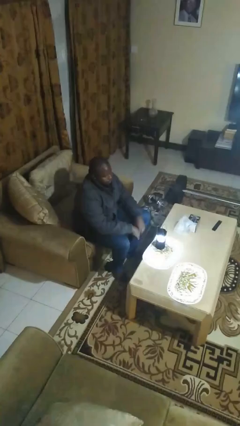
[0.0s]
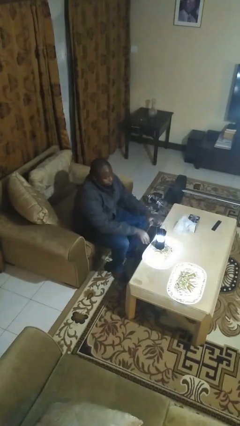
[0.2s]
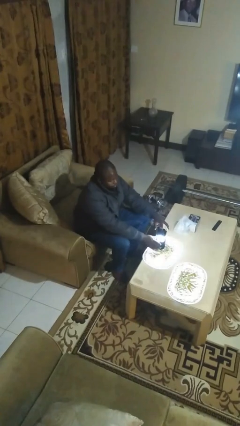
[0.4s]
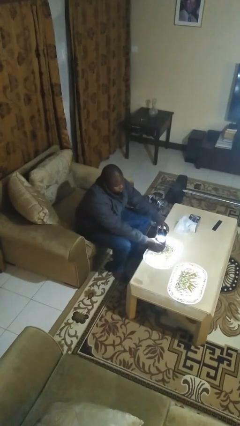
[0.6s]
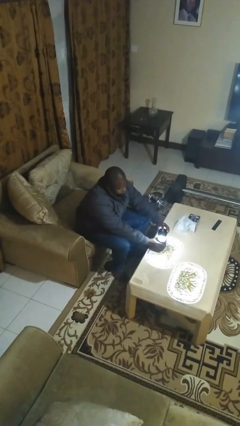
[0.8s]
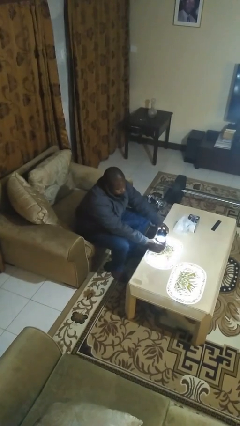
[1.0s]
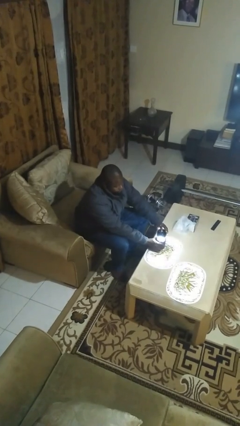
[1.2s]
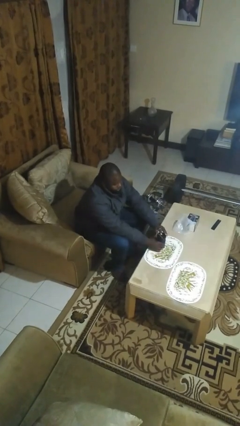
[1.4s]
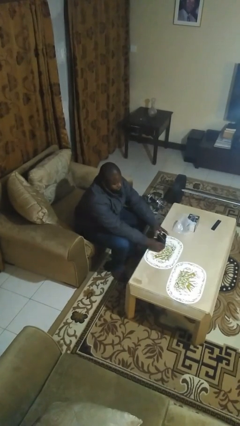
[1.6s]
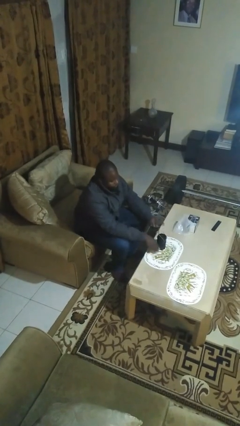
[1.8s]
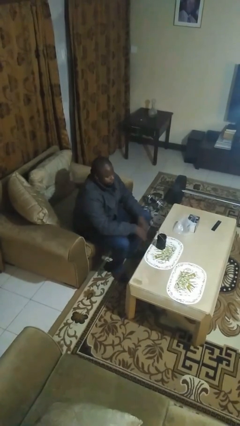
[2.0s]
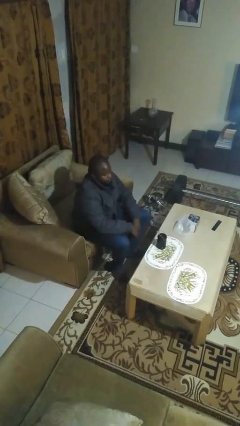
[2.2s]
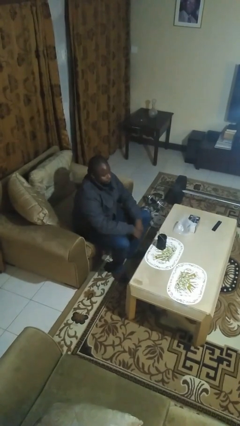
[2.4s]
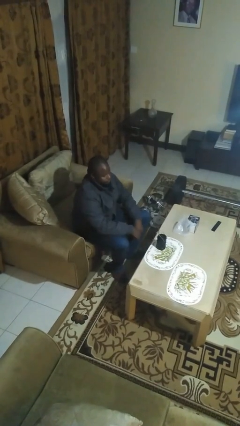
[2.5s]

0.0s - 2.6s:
person turns off lamp

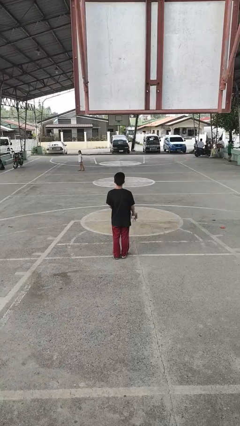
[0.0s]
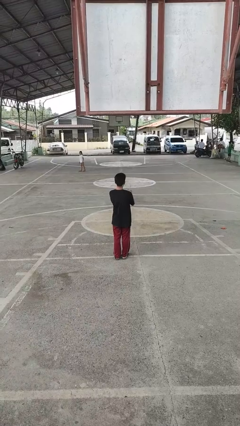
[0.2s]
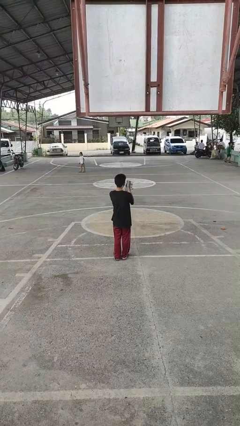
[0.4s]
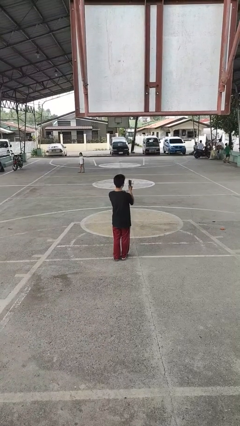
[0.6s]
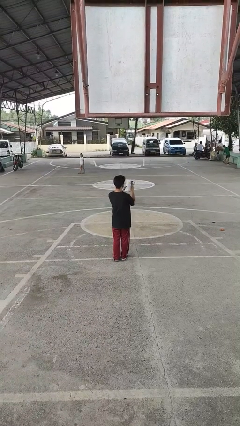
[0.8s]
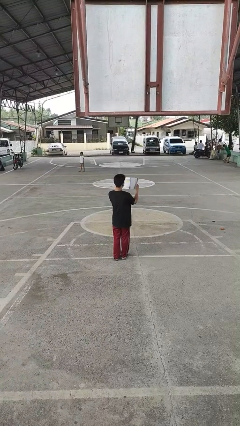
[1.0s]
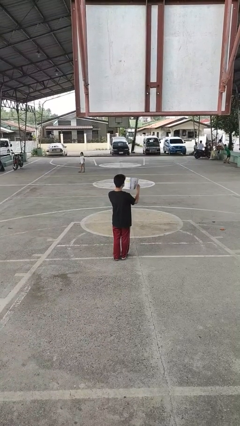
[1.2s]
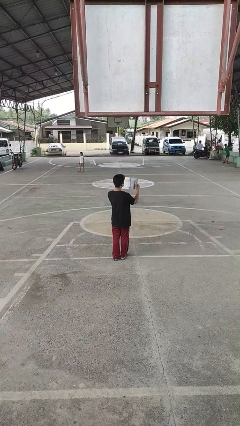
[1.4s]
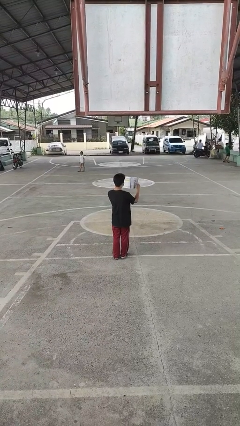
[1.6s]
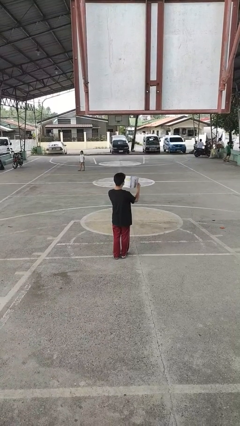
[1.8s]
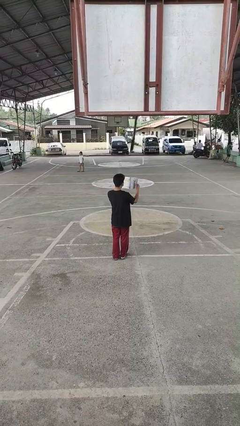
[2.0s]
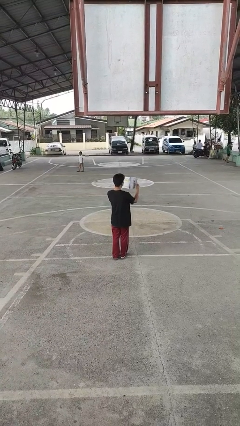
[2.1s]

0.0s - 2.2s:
person reads magazine

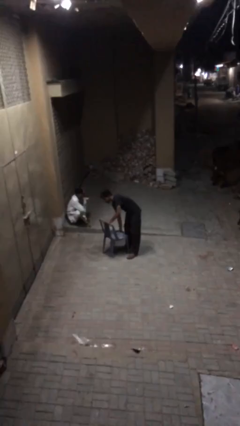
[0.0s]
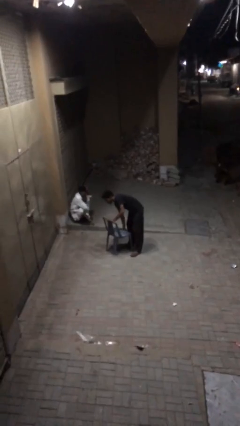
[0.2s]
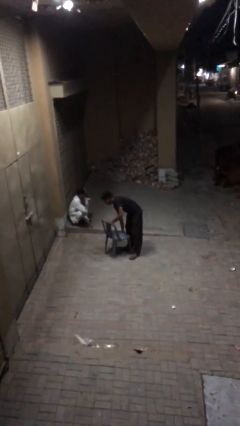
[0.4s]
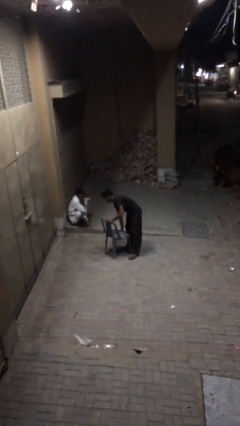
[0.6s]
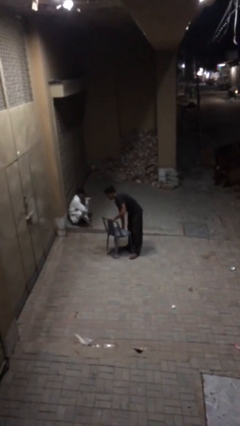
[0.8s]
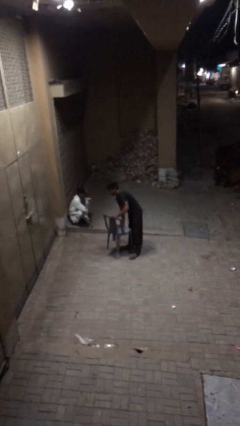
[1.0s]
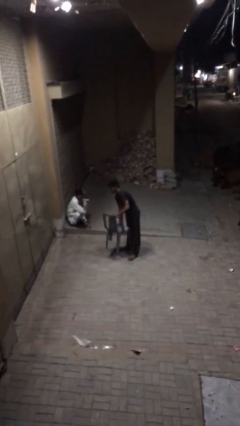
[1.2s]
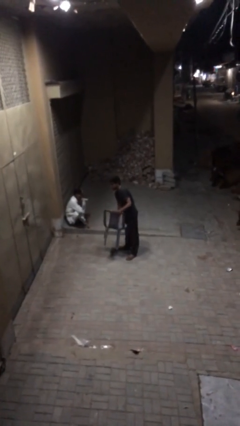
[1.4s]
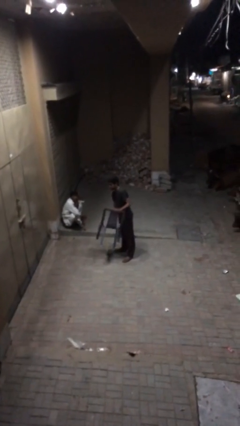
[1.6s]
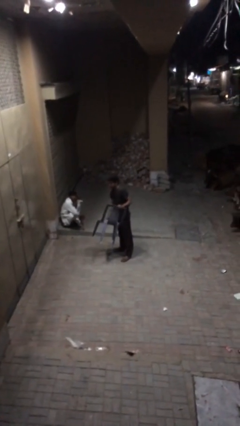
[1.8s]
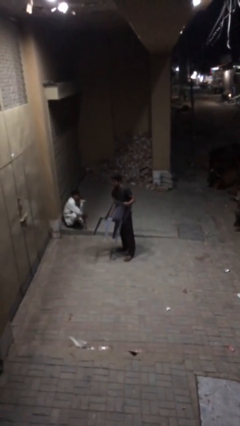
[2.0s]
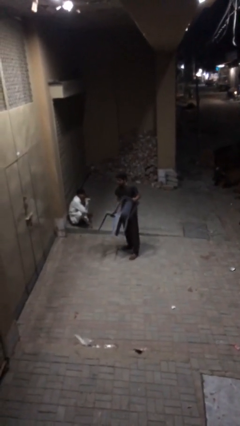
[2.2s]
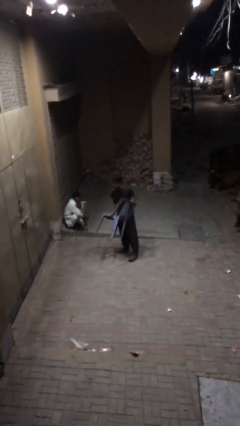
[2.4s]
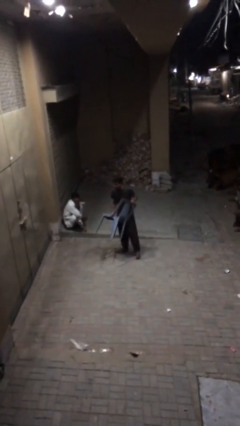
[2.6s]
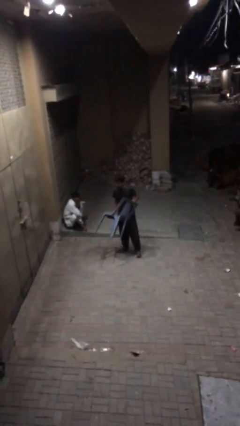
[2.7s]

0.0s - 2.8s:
person picks up object from floor

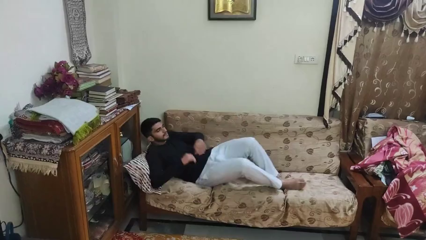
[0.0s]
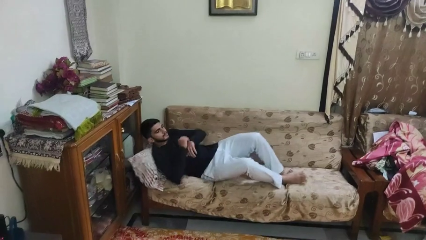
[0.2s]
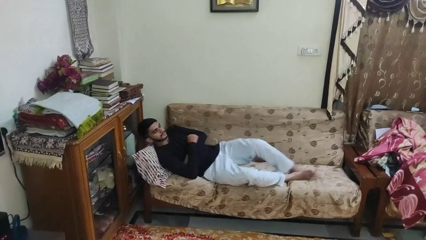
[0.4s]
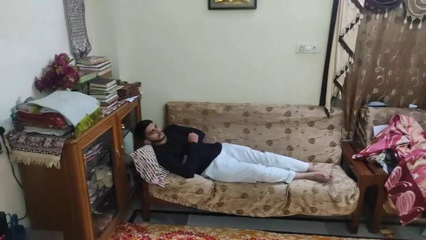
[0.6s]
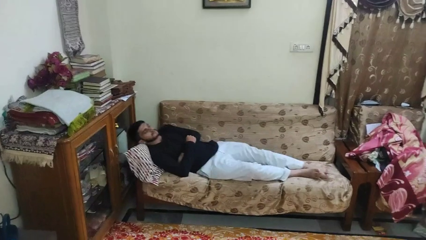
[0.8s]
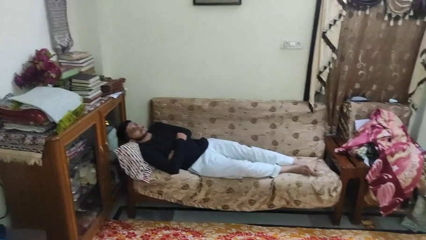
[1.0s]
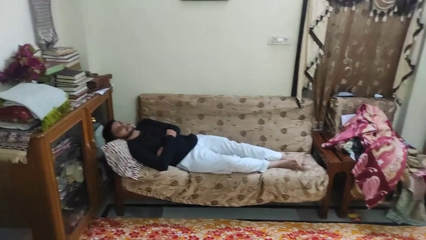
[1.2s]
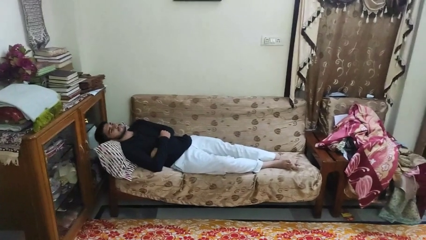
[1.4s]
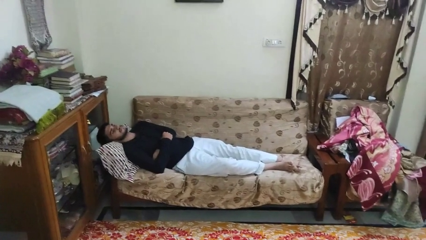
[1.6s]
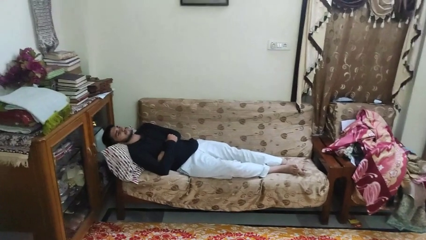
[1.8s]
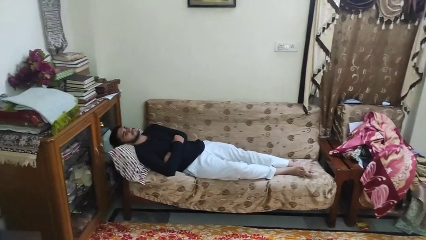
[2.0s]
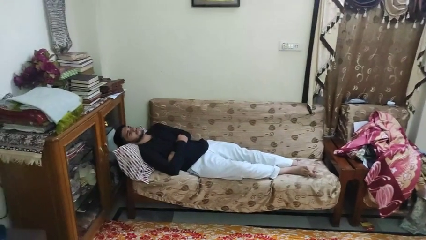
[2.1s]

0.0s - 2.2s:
person lies down on couch

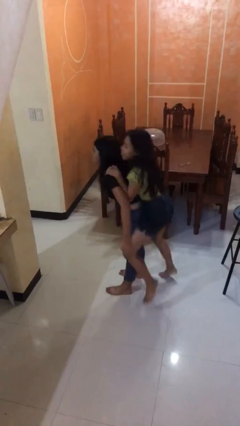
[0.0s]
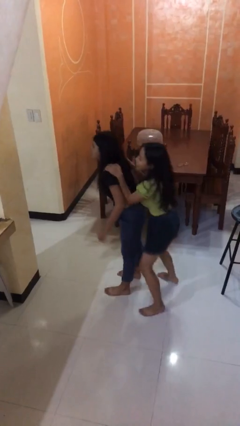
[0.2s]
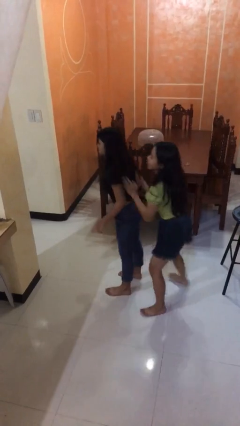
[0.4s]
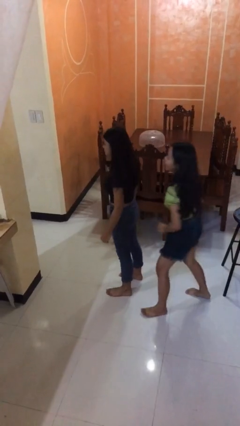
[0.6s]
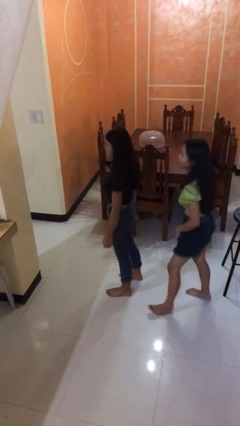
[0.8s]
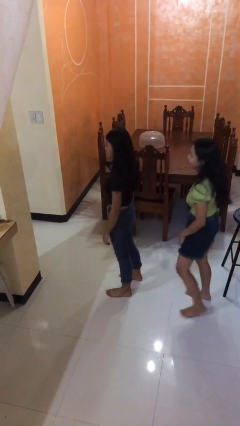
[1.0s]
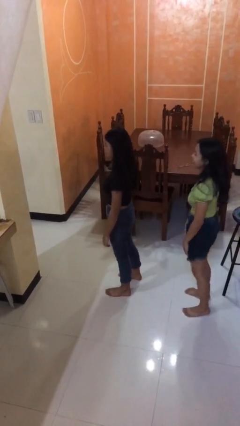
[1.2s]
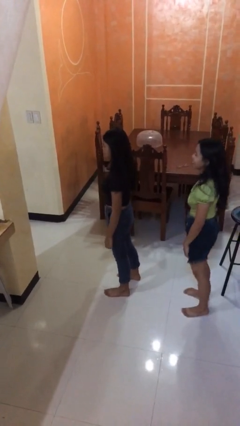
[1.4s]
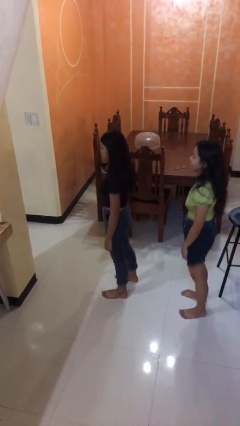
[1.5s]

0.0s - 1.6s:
person puts down person

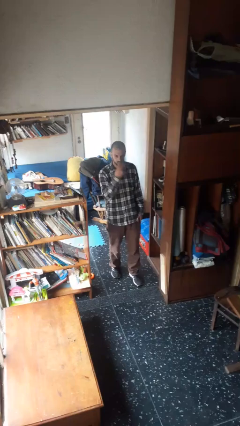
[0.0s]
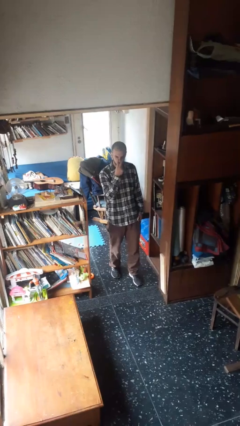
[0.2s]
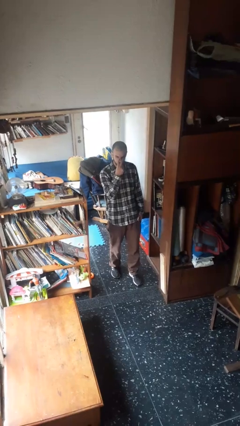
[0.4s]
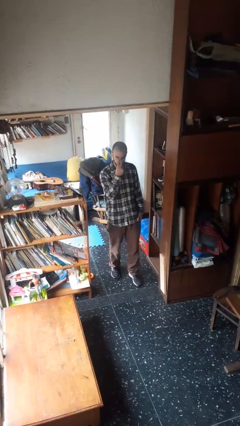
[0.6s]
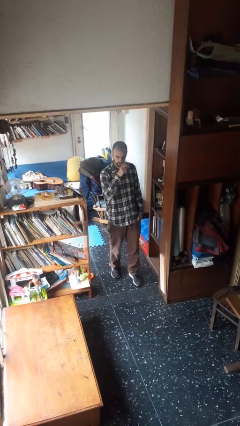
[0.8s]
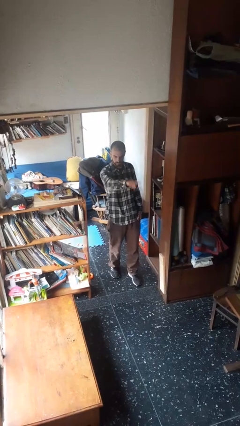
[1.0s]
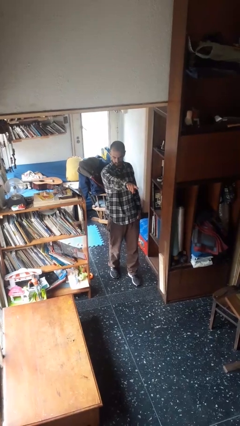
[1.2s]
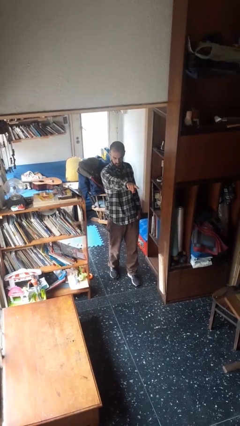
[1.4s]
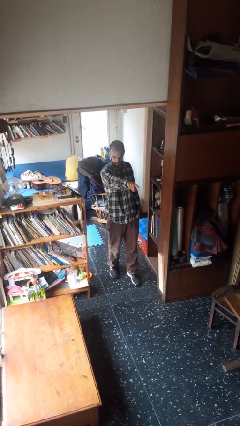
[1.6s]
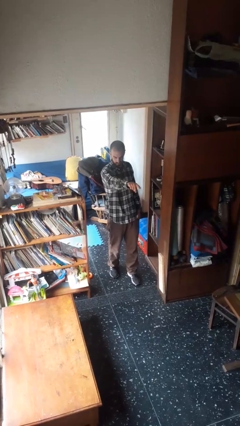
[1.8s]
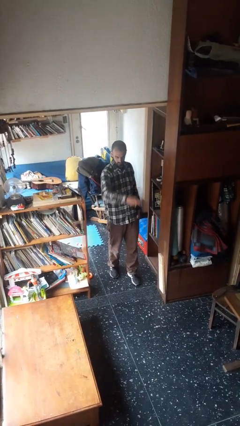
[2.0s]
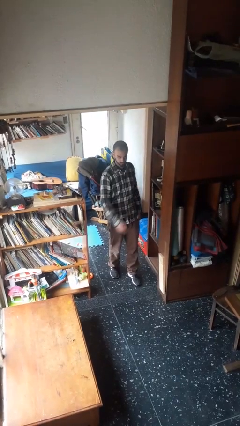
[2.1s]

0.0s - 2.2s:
person gestures watch closely

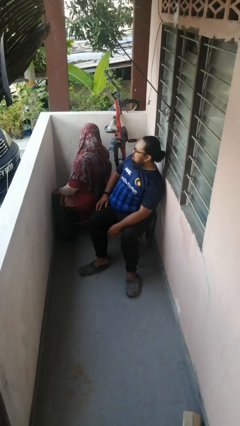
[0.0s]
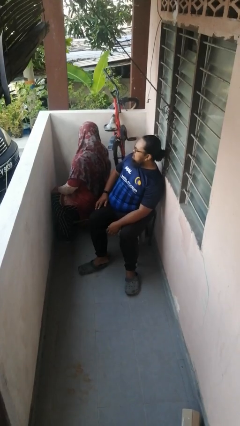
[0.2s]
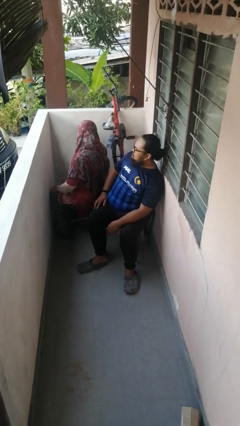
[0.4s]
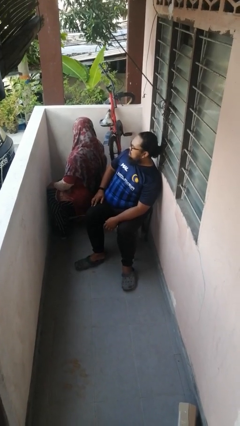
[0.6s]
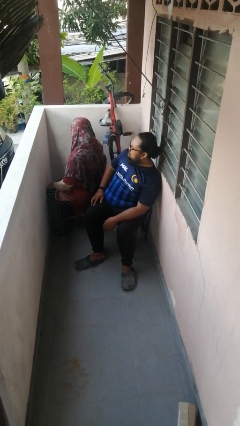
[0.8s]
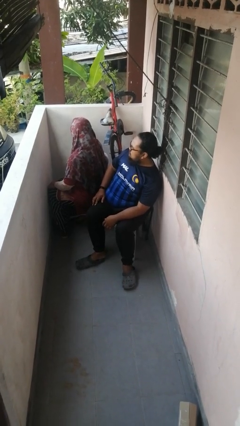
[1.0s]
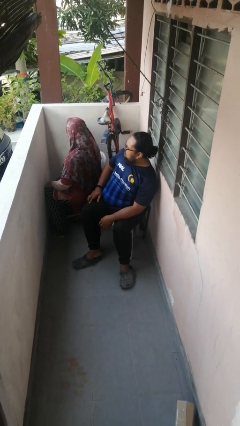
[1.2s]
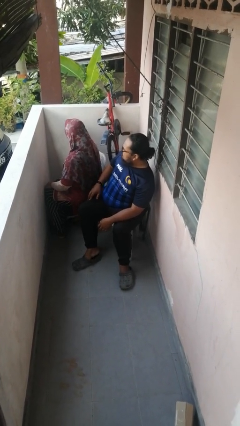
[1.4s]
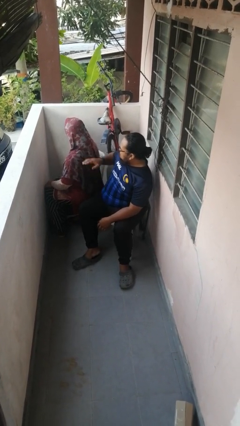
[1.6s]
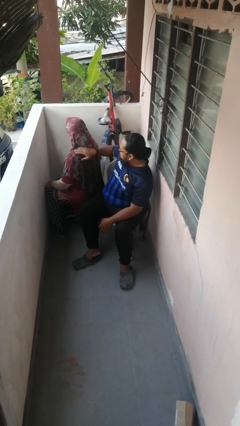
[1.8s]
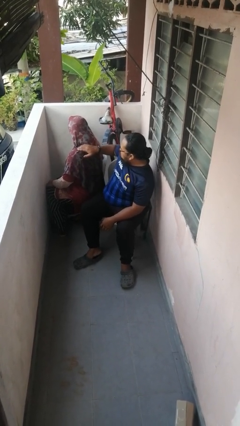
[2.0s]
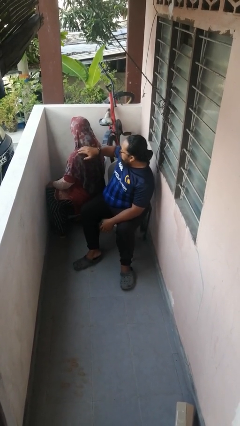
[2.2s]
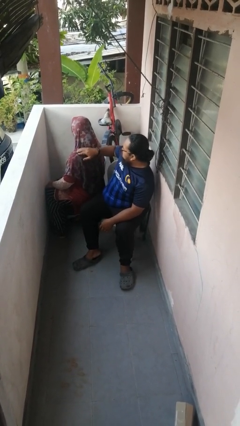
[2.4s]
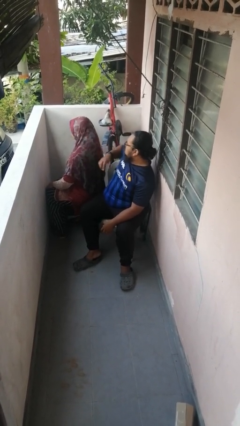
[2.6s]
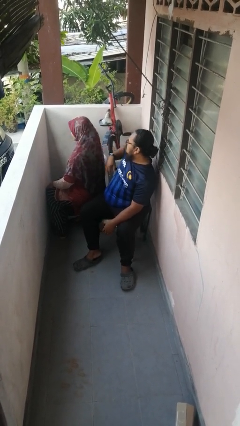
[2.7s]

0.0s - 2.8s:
person touches back of person

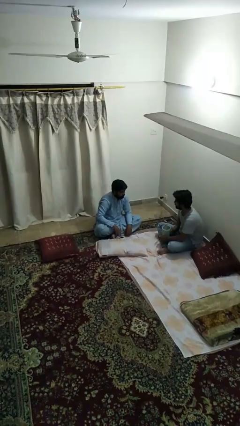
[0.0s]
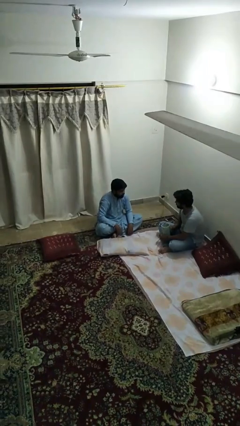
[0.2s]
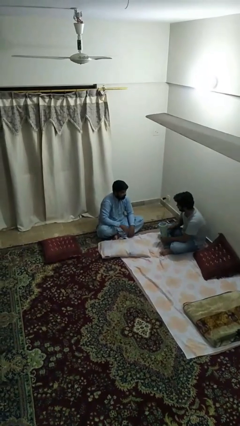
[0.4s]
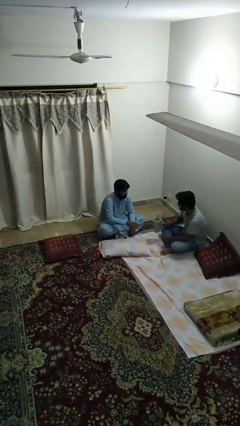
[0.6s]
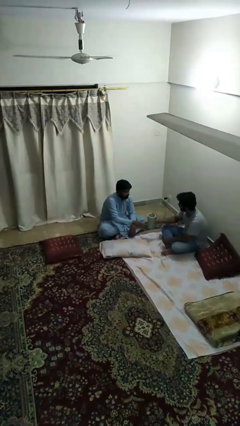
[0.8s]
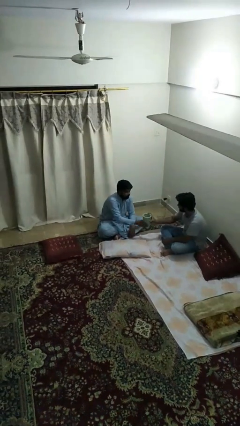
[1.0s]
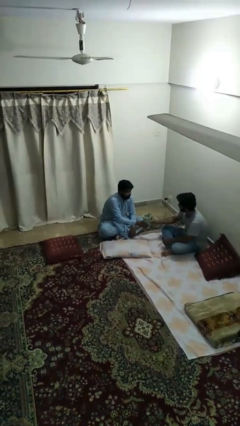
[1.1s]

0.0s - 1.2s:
person transfers object to person
